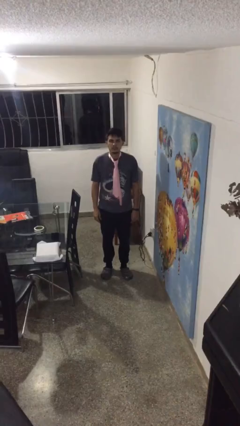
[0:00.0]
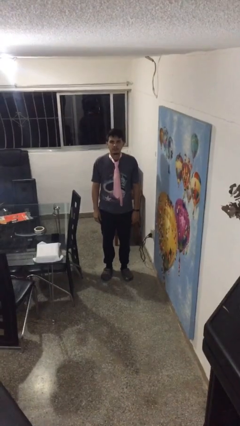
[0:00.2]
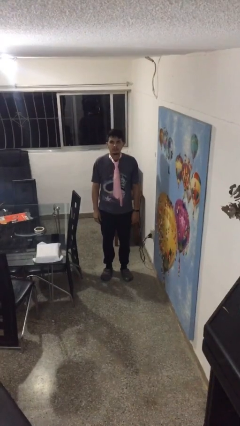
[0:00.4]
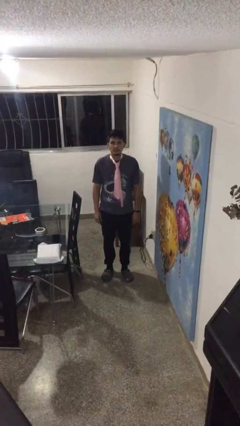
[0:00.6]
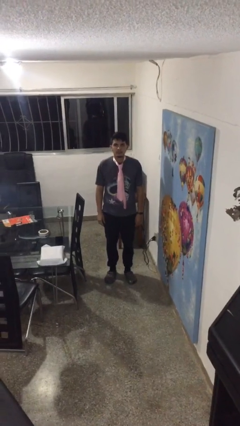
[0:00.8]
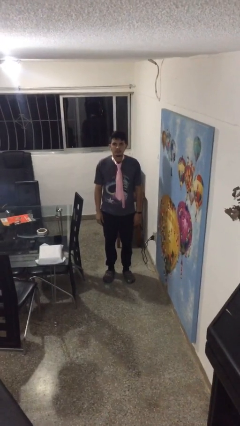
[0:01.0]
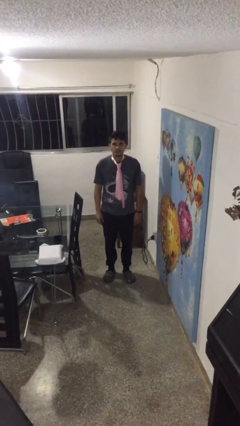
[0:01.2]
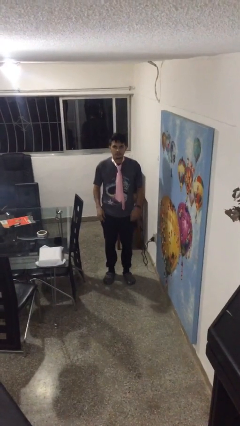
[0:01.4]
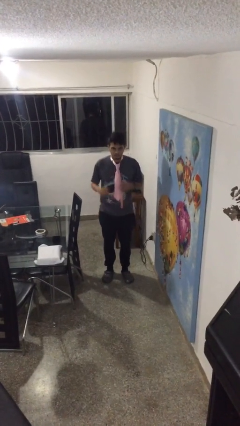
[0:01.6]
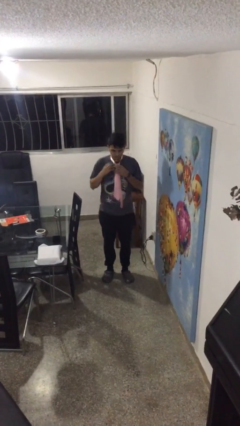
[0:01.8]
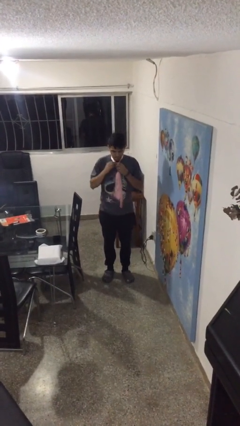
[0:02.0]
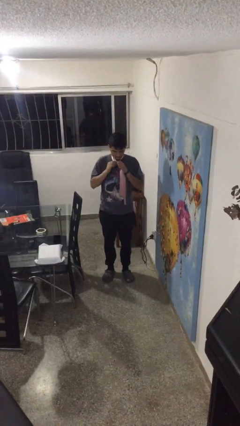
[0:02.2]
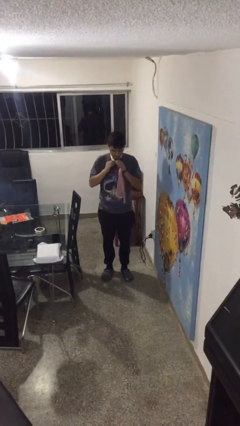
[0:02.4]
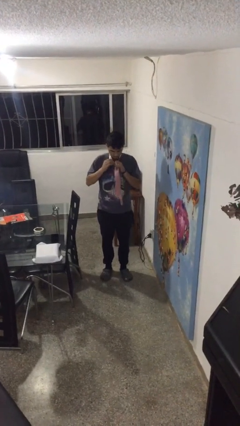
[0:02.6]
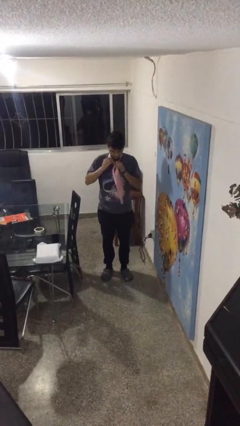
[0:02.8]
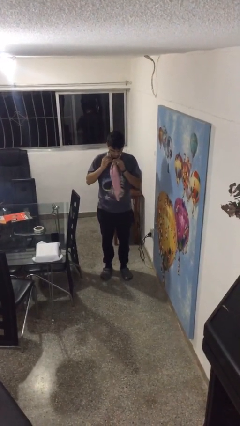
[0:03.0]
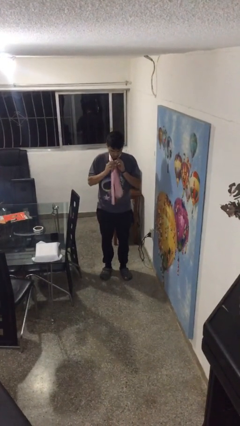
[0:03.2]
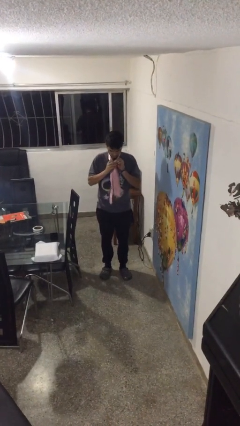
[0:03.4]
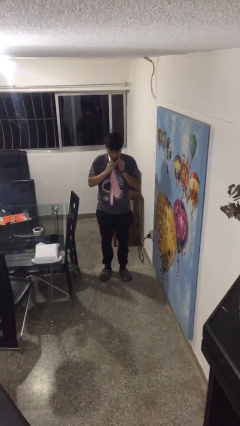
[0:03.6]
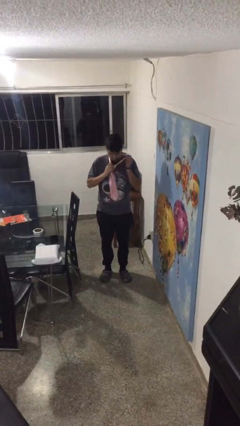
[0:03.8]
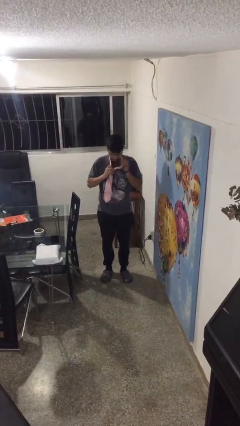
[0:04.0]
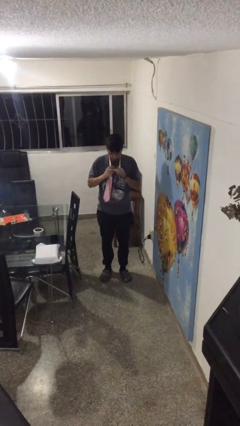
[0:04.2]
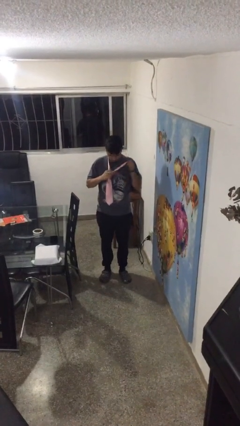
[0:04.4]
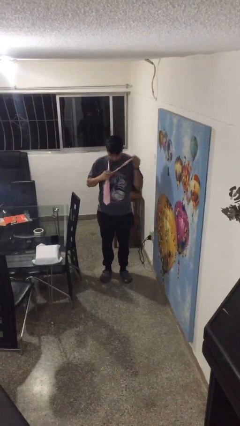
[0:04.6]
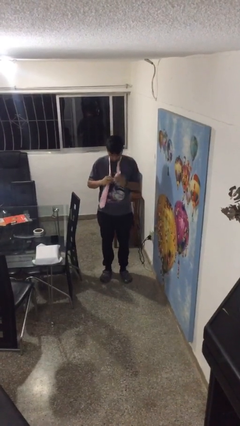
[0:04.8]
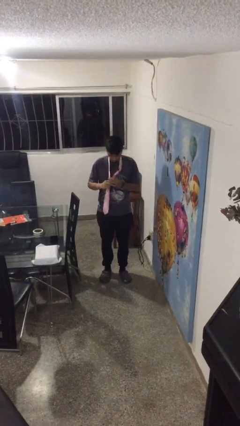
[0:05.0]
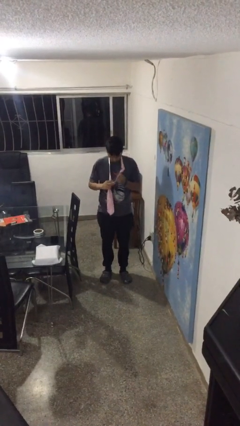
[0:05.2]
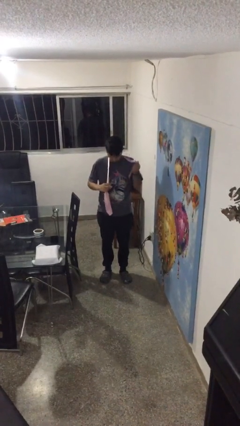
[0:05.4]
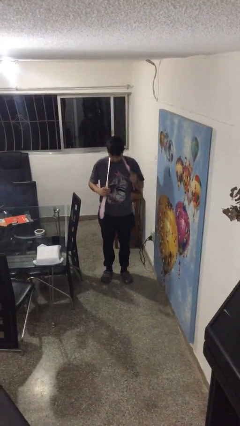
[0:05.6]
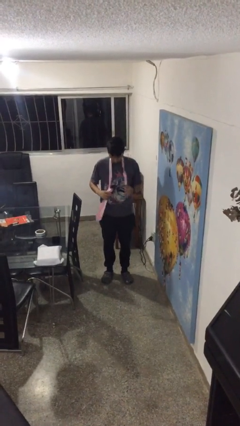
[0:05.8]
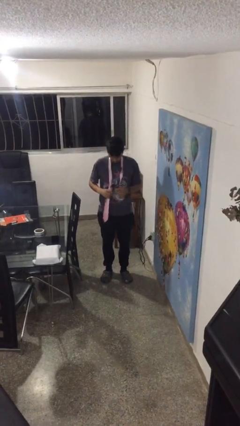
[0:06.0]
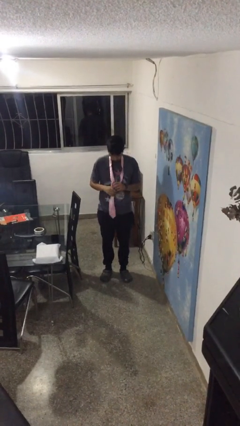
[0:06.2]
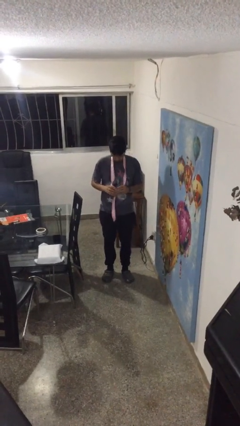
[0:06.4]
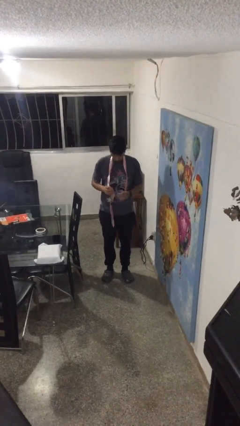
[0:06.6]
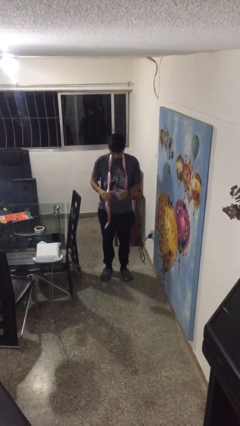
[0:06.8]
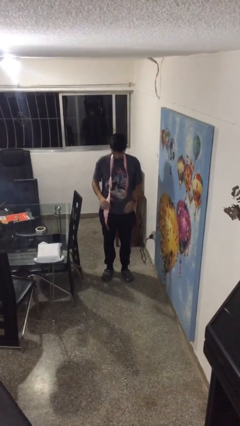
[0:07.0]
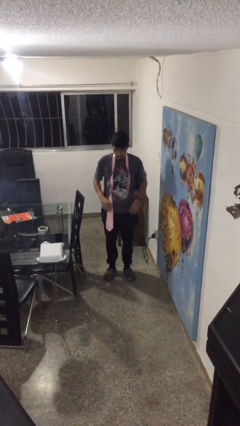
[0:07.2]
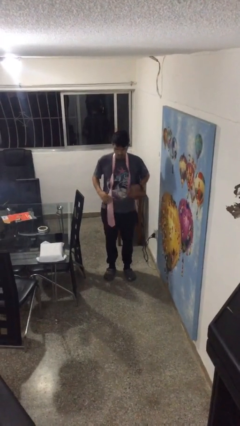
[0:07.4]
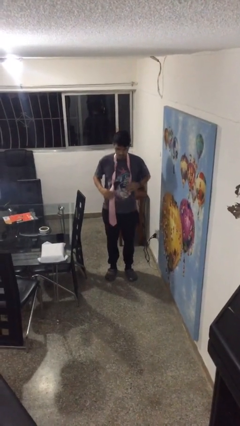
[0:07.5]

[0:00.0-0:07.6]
person takes off necktie

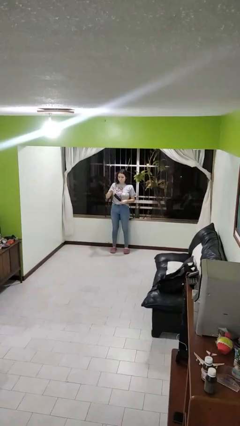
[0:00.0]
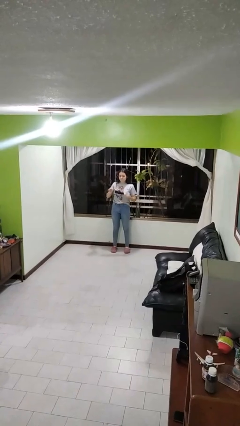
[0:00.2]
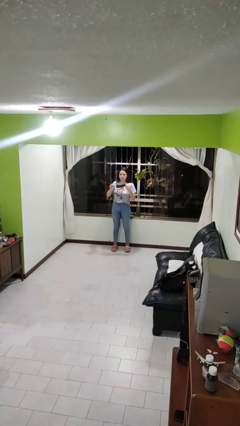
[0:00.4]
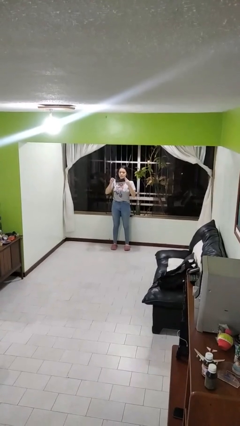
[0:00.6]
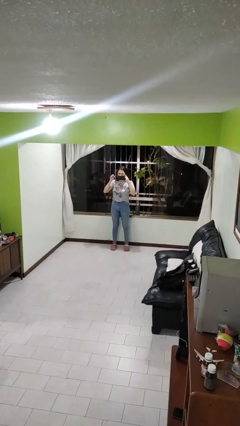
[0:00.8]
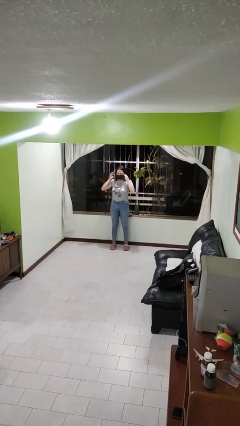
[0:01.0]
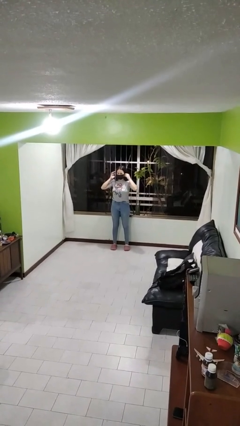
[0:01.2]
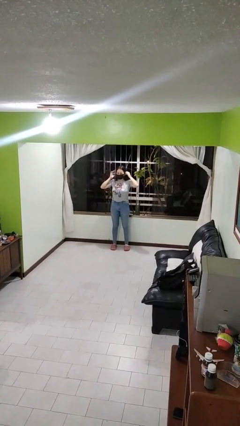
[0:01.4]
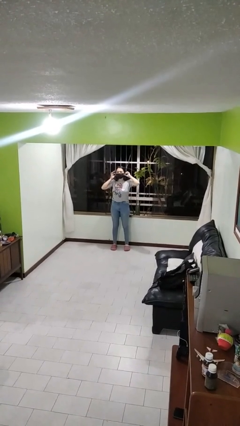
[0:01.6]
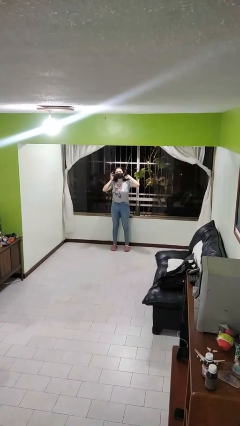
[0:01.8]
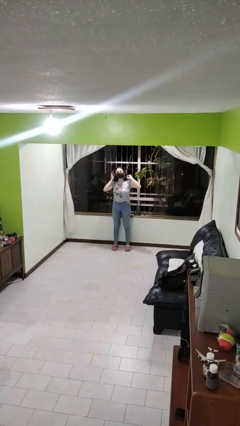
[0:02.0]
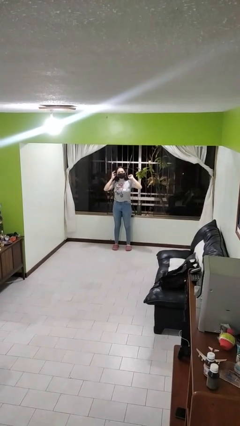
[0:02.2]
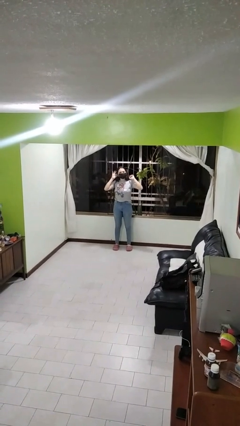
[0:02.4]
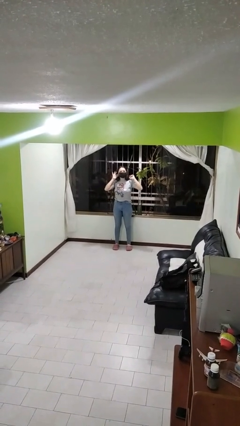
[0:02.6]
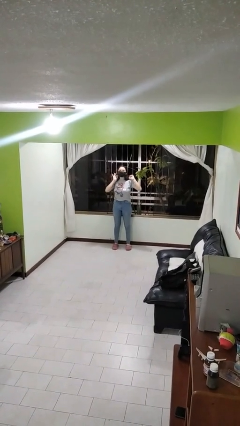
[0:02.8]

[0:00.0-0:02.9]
person puts on facemask

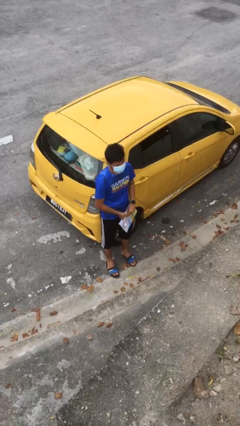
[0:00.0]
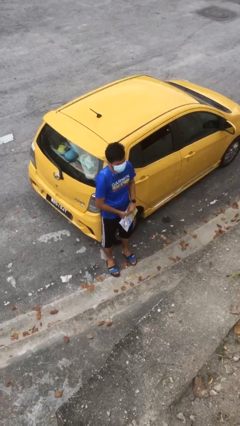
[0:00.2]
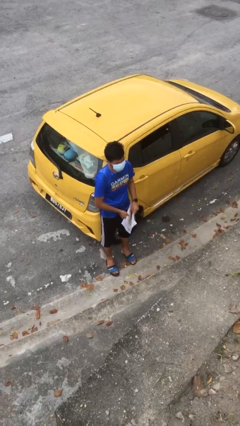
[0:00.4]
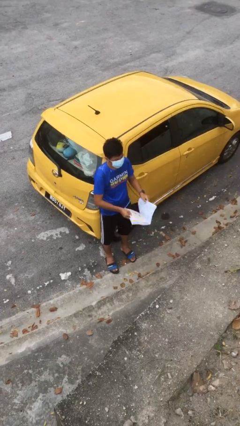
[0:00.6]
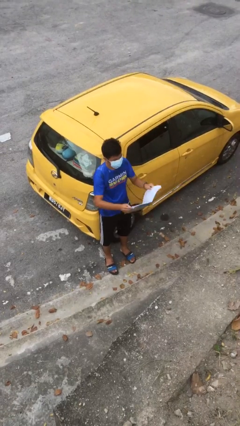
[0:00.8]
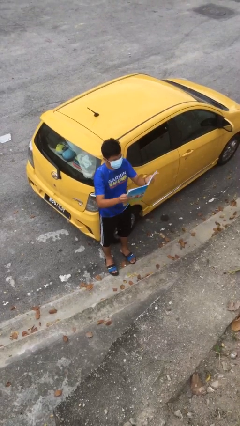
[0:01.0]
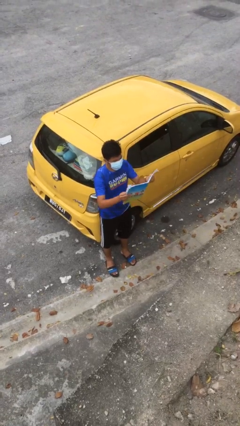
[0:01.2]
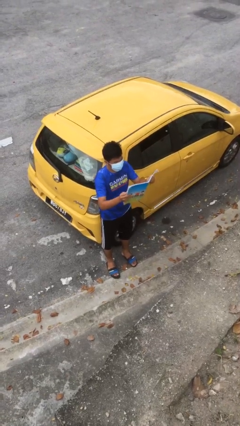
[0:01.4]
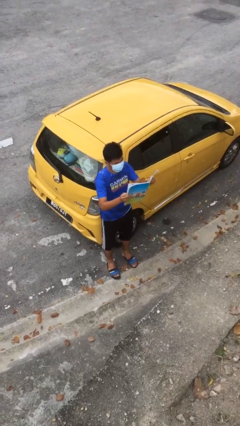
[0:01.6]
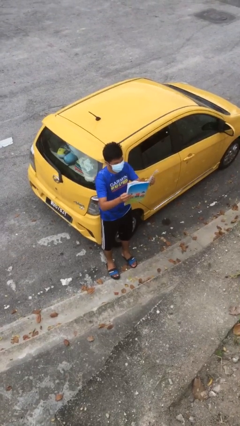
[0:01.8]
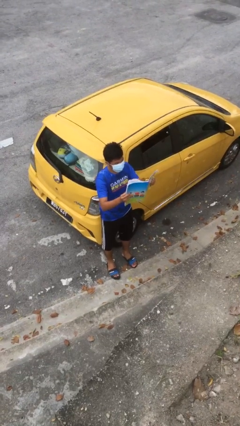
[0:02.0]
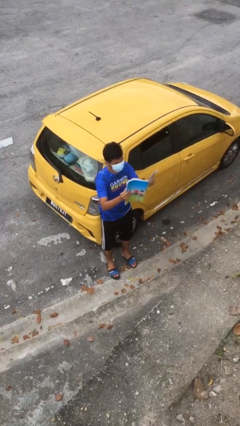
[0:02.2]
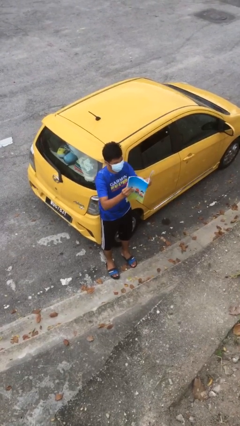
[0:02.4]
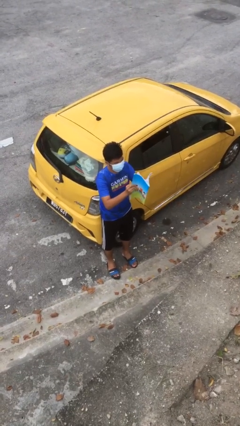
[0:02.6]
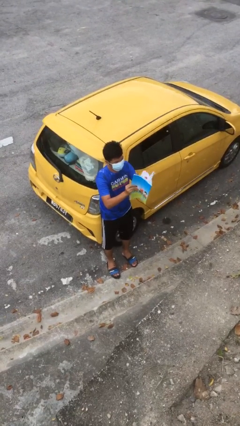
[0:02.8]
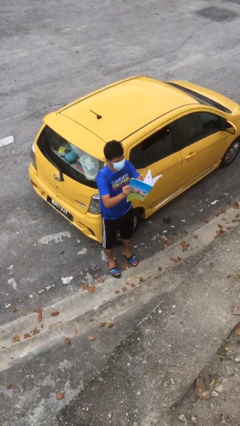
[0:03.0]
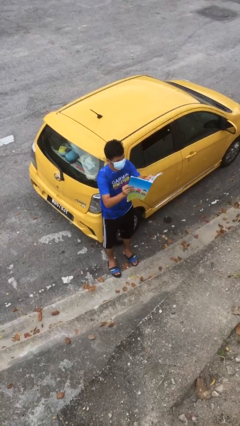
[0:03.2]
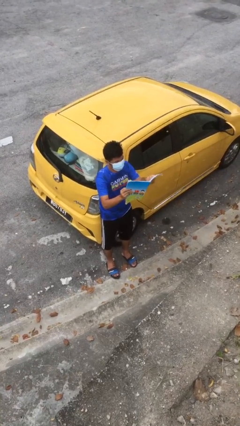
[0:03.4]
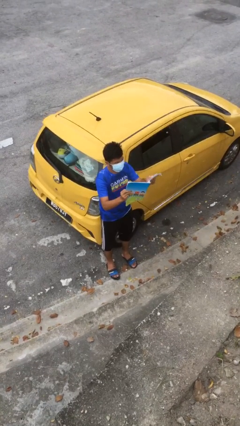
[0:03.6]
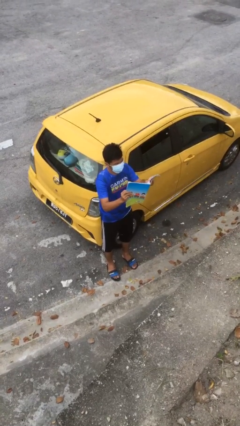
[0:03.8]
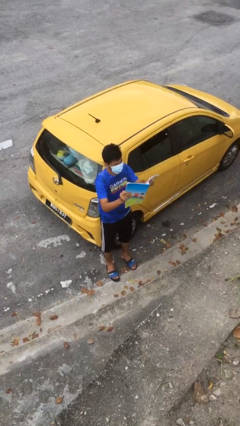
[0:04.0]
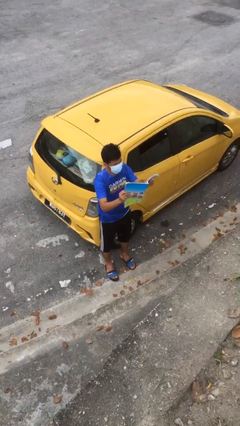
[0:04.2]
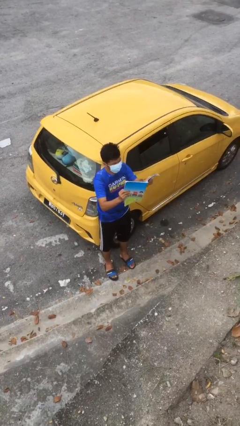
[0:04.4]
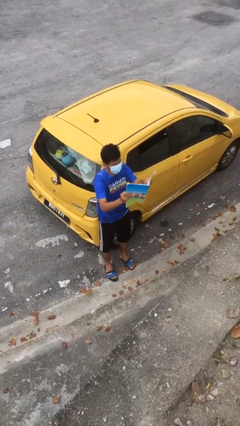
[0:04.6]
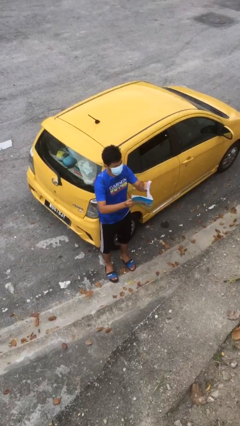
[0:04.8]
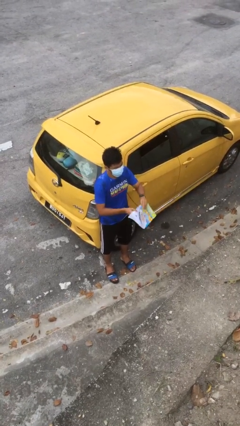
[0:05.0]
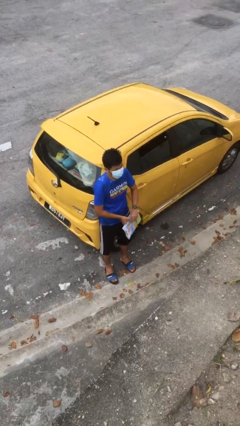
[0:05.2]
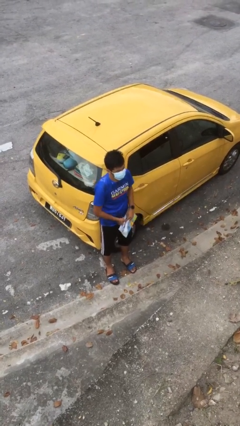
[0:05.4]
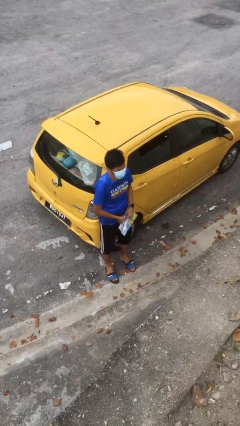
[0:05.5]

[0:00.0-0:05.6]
person reads document

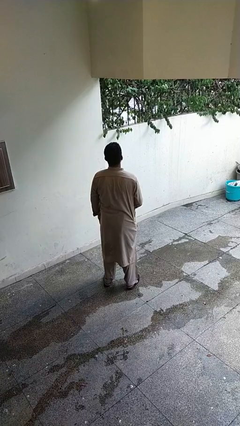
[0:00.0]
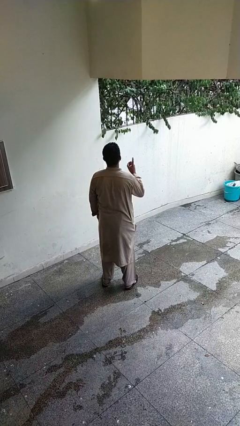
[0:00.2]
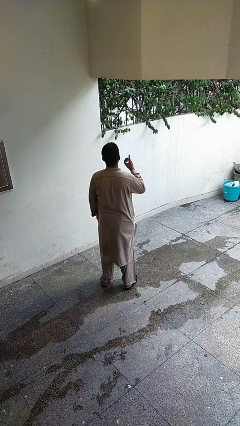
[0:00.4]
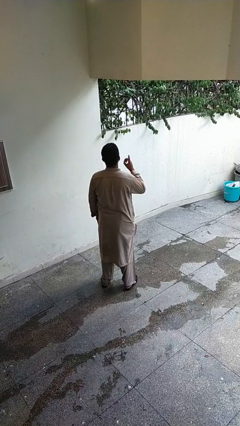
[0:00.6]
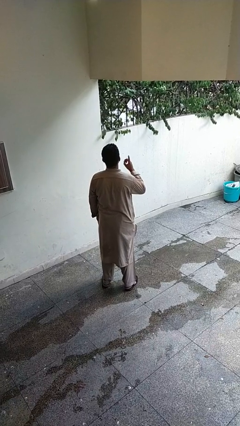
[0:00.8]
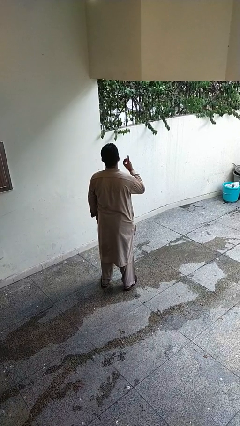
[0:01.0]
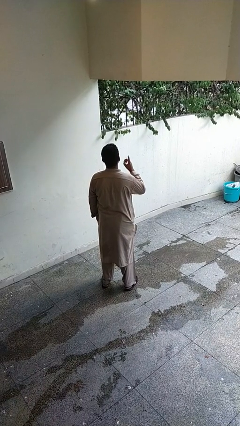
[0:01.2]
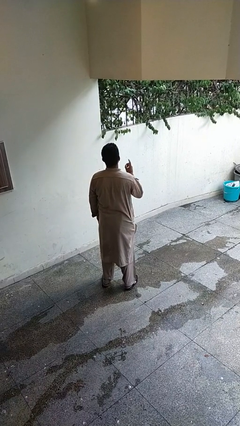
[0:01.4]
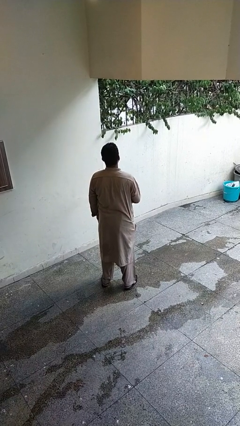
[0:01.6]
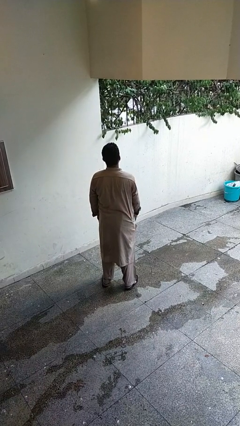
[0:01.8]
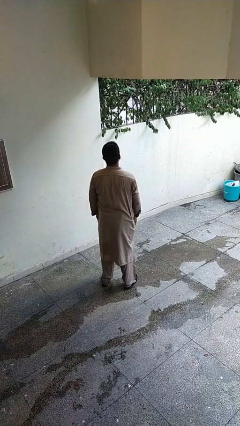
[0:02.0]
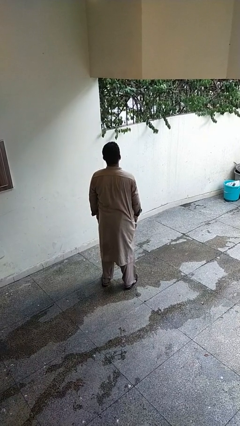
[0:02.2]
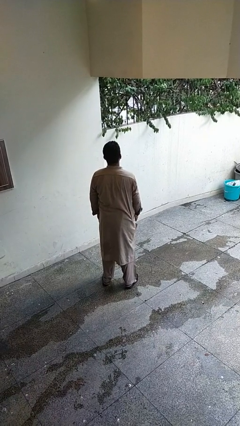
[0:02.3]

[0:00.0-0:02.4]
person gestures number one
